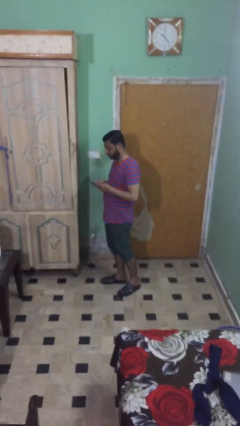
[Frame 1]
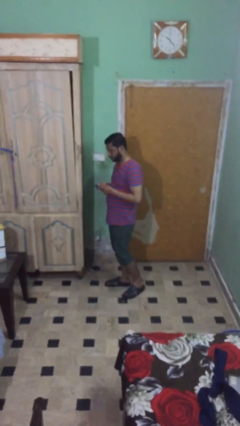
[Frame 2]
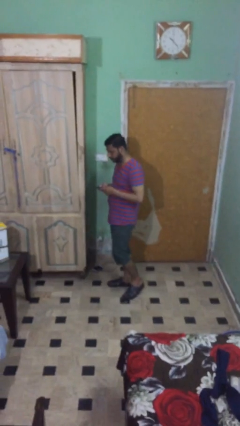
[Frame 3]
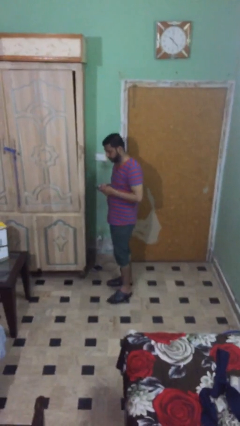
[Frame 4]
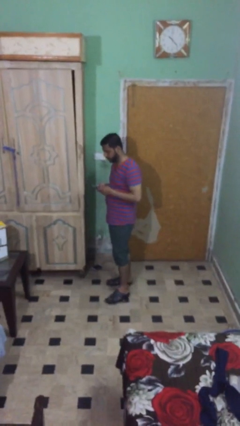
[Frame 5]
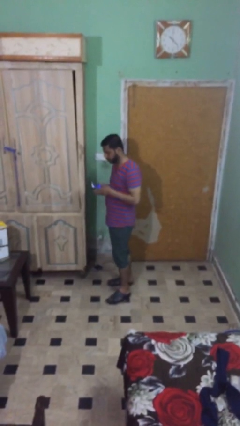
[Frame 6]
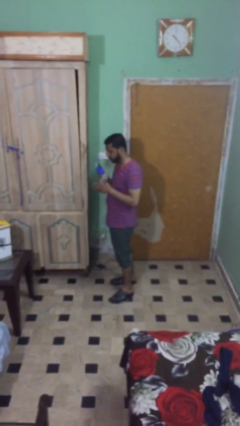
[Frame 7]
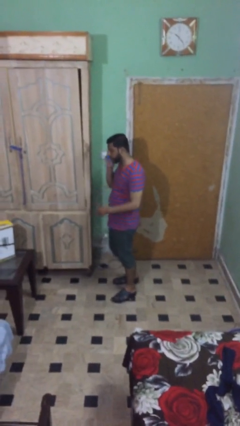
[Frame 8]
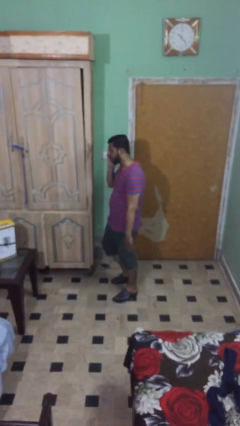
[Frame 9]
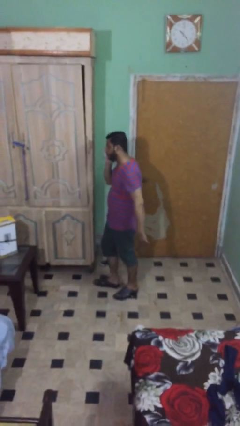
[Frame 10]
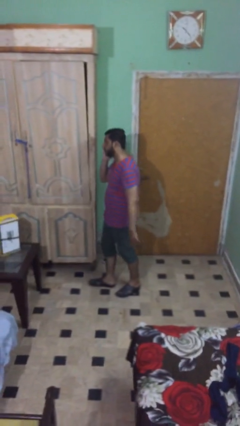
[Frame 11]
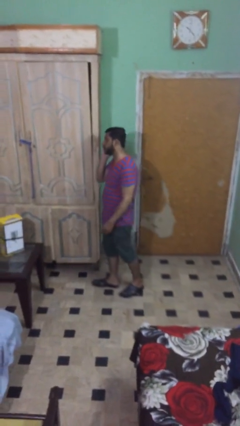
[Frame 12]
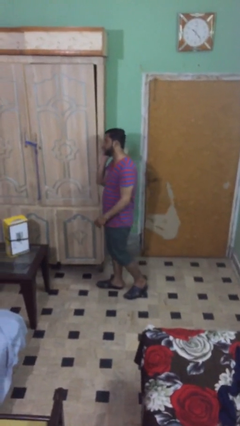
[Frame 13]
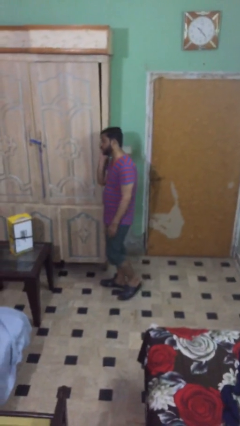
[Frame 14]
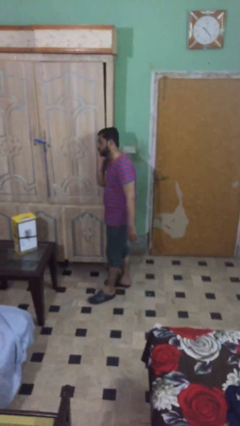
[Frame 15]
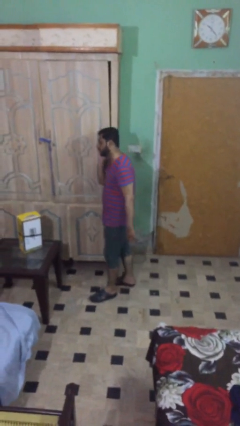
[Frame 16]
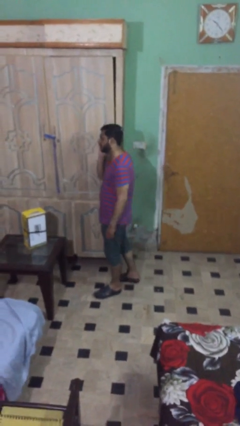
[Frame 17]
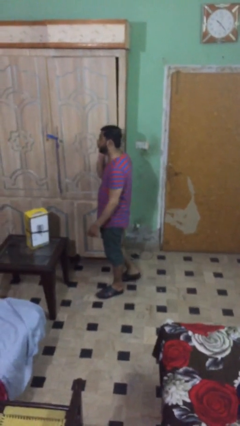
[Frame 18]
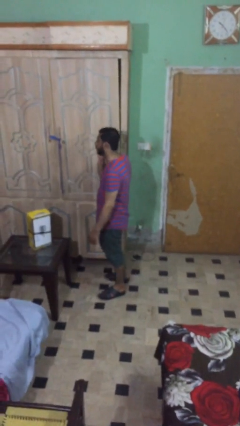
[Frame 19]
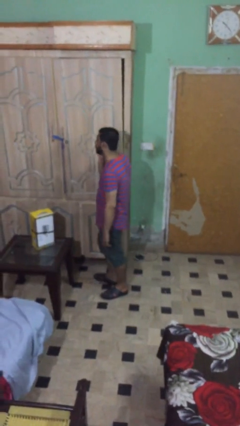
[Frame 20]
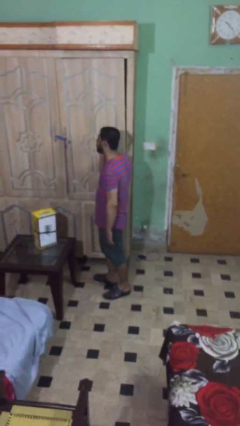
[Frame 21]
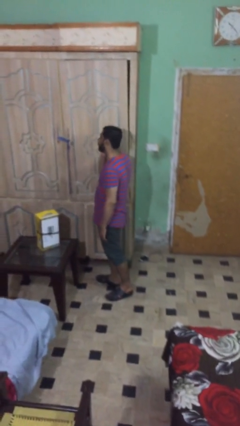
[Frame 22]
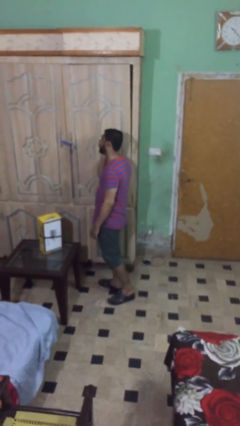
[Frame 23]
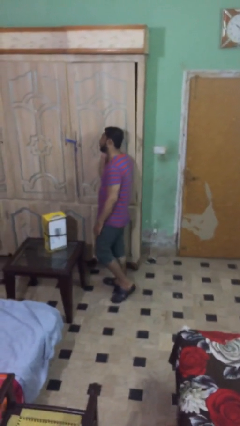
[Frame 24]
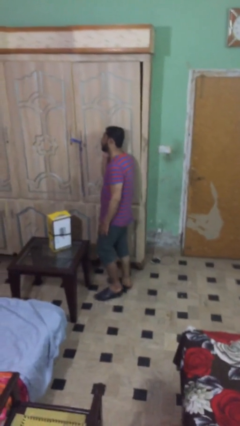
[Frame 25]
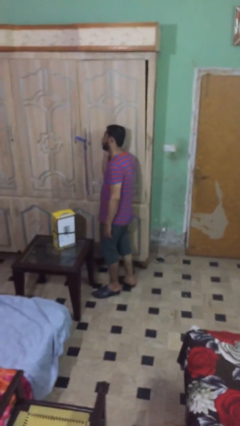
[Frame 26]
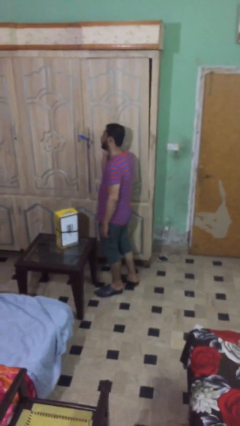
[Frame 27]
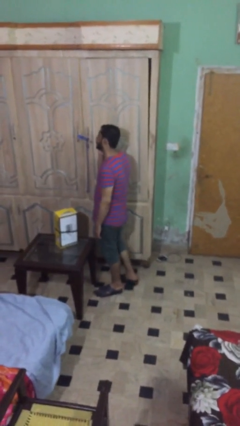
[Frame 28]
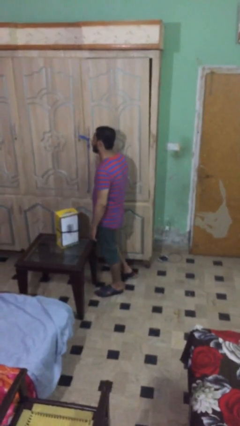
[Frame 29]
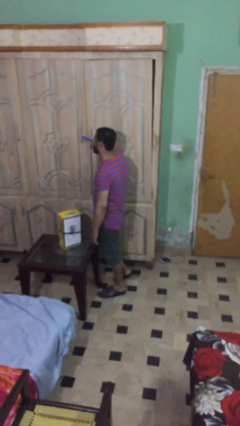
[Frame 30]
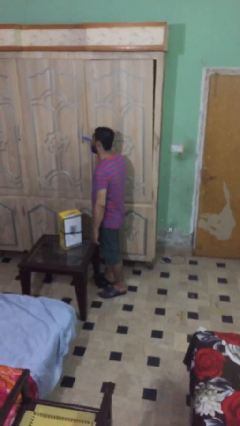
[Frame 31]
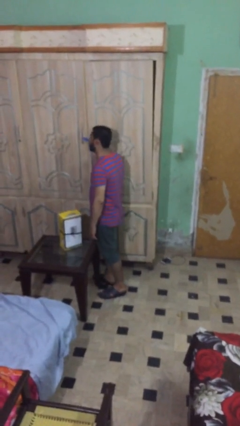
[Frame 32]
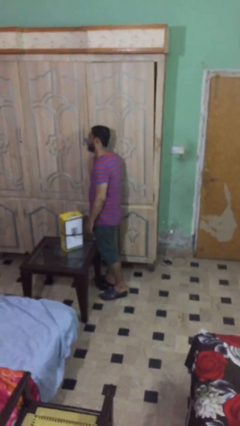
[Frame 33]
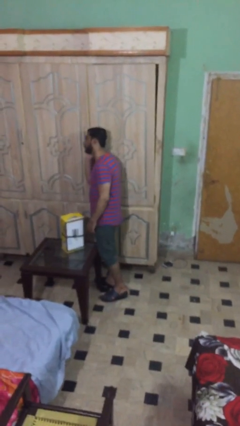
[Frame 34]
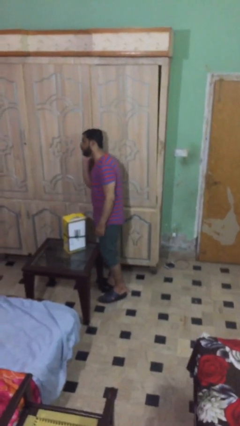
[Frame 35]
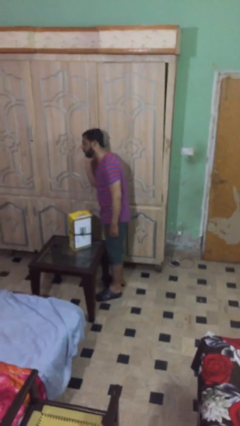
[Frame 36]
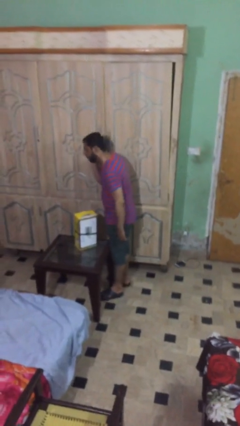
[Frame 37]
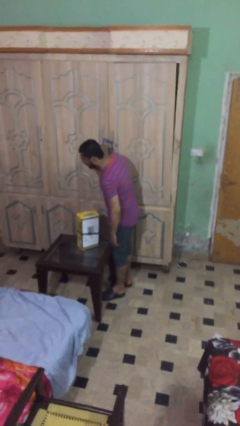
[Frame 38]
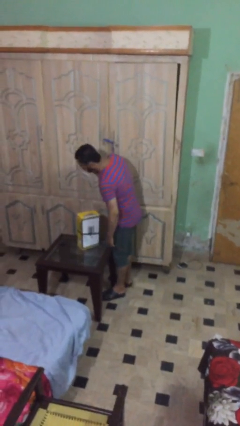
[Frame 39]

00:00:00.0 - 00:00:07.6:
person talks on phone

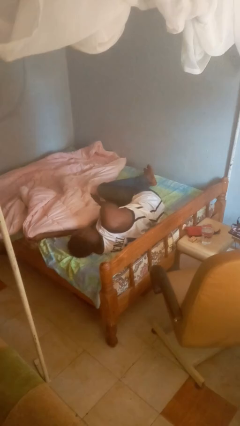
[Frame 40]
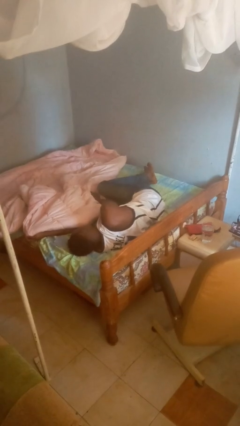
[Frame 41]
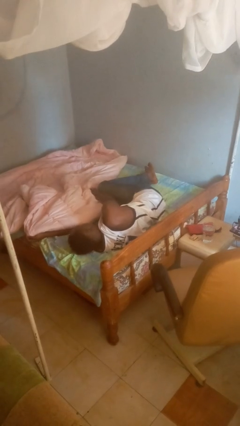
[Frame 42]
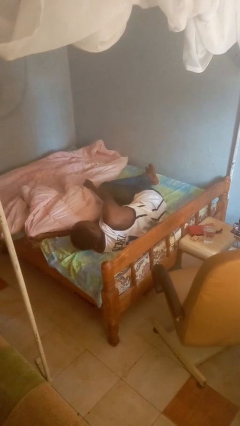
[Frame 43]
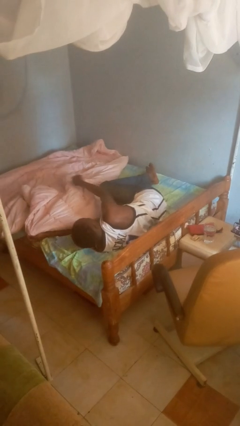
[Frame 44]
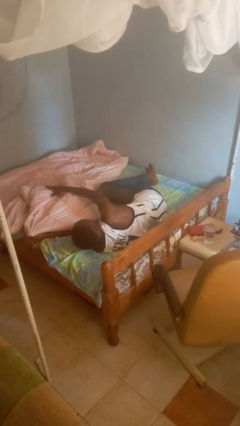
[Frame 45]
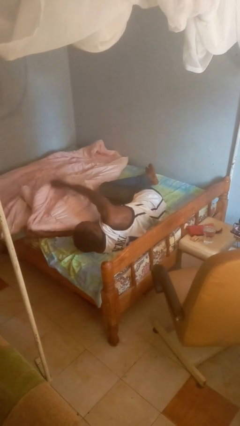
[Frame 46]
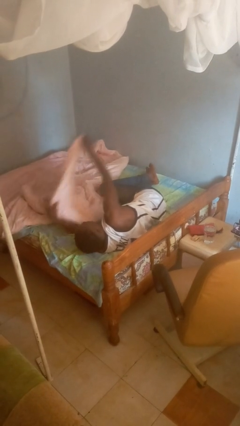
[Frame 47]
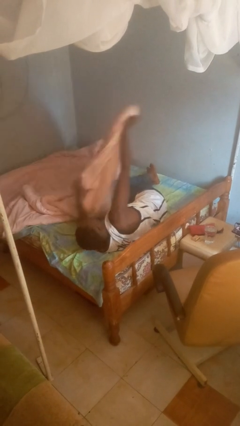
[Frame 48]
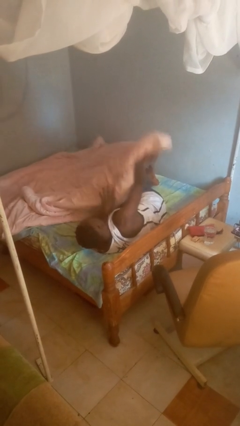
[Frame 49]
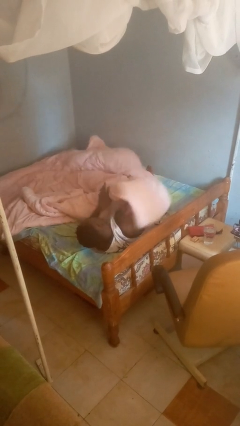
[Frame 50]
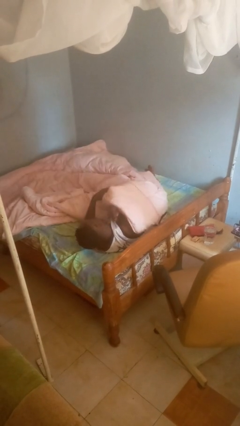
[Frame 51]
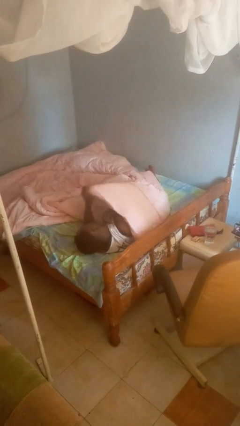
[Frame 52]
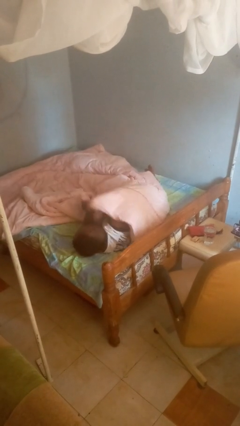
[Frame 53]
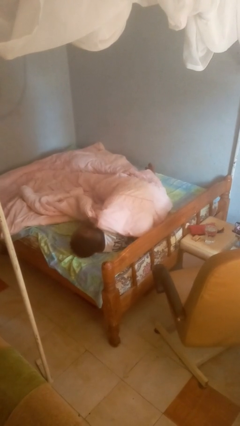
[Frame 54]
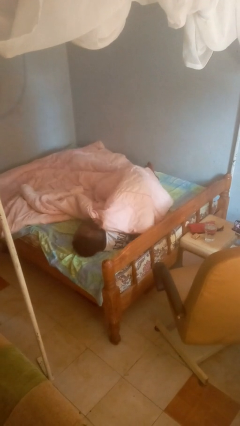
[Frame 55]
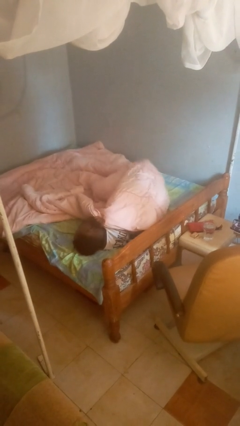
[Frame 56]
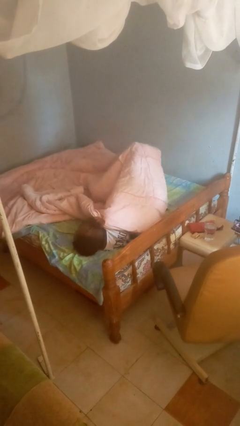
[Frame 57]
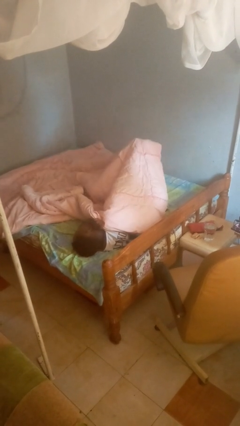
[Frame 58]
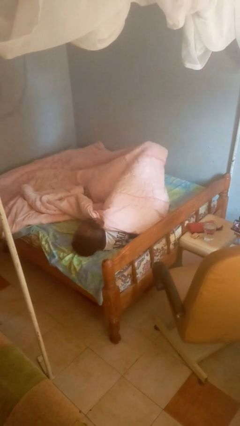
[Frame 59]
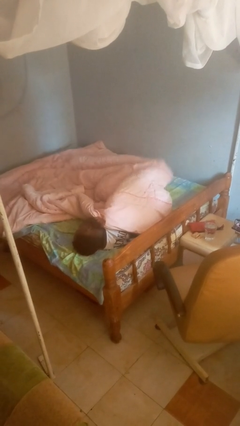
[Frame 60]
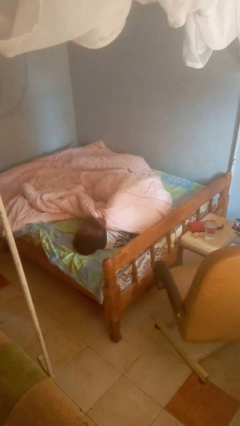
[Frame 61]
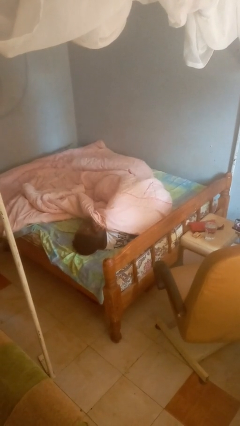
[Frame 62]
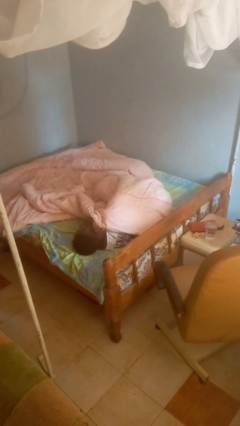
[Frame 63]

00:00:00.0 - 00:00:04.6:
person covers with blanket

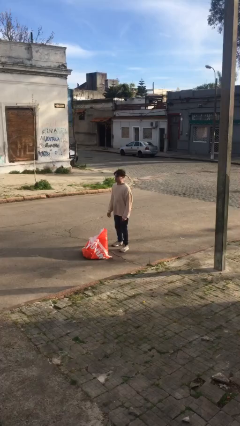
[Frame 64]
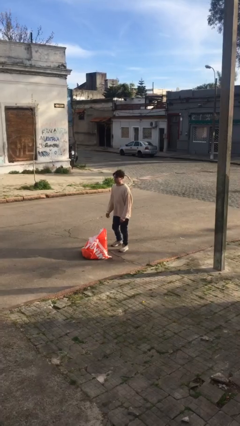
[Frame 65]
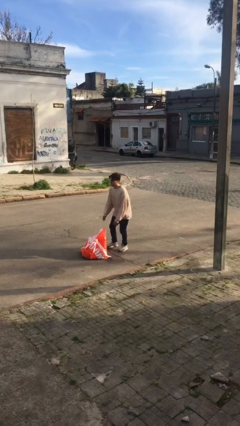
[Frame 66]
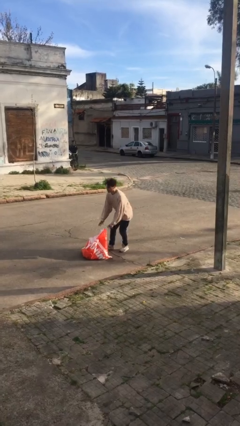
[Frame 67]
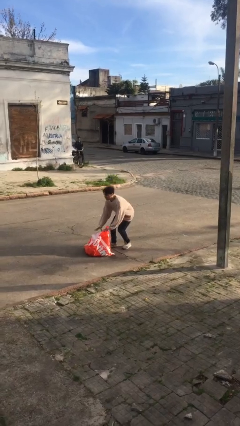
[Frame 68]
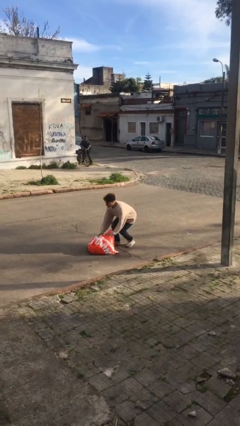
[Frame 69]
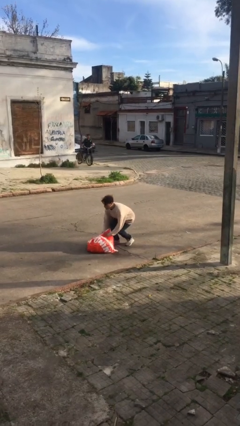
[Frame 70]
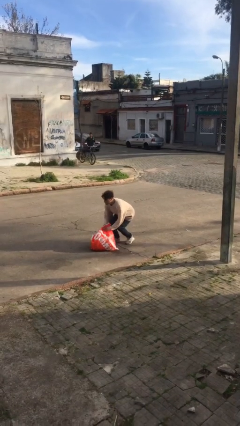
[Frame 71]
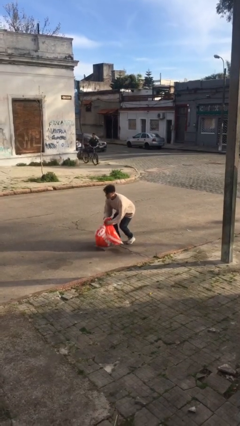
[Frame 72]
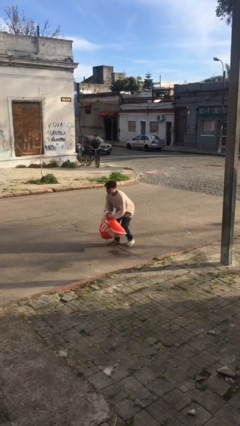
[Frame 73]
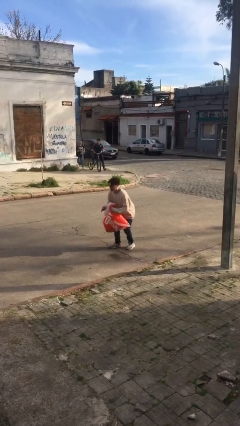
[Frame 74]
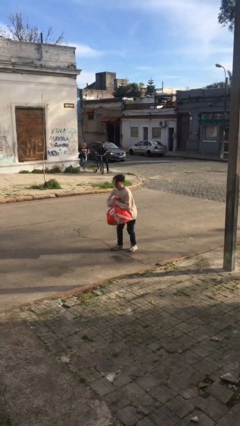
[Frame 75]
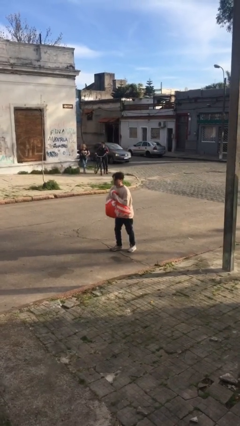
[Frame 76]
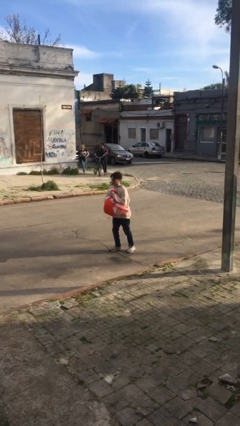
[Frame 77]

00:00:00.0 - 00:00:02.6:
person picks up object from floor

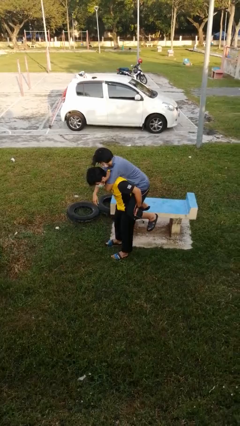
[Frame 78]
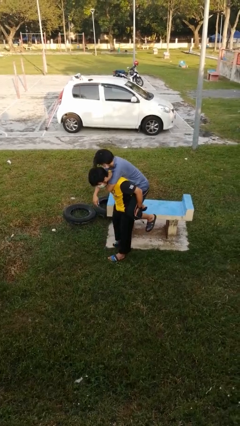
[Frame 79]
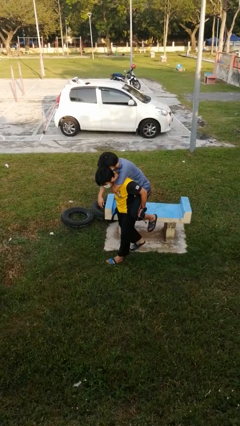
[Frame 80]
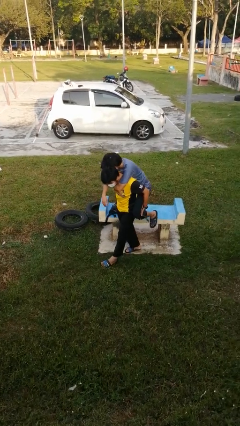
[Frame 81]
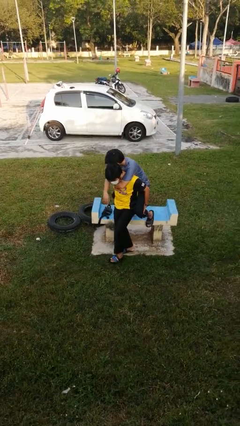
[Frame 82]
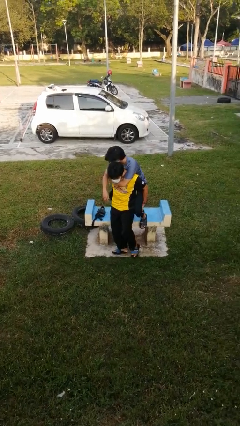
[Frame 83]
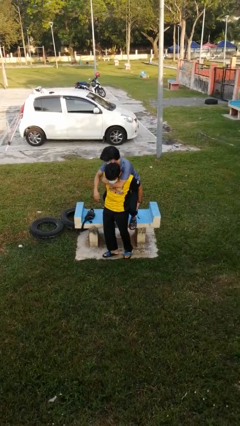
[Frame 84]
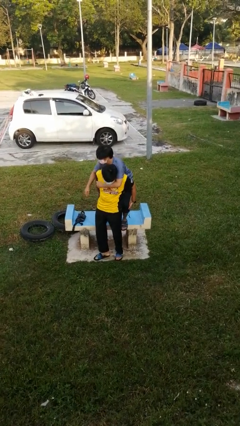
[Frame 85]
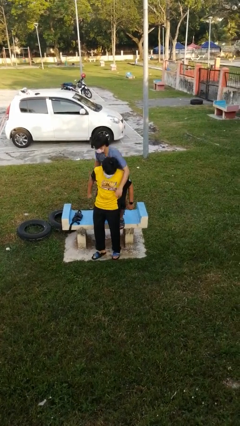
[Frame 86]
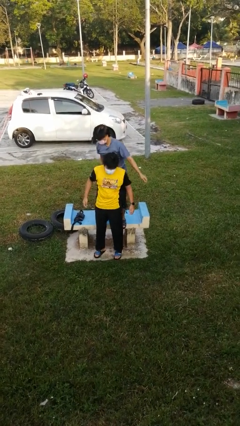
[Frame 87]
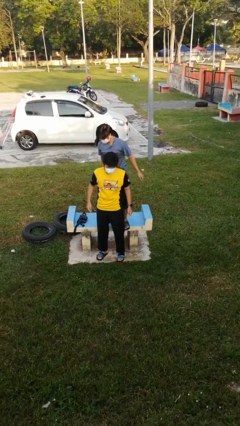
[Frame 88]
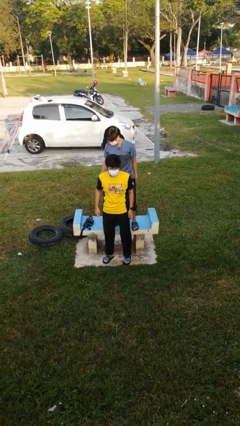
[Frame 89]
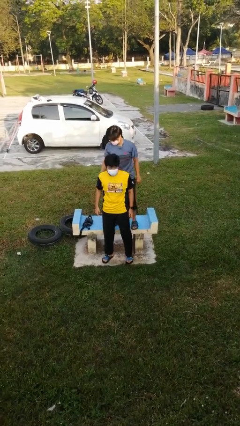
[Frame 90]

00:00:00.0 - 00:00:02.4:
person puts down person

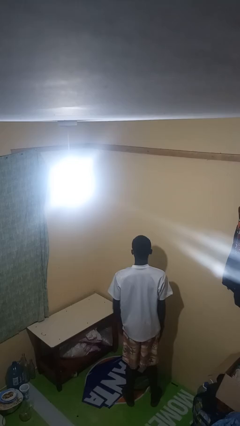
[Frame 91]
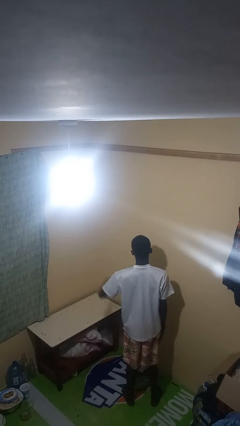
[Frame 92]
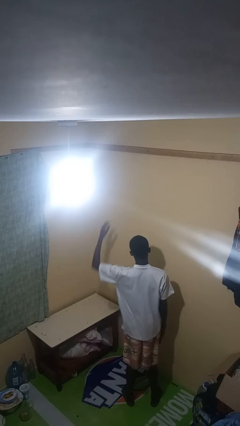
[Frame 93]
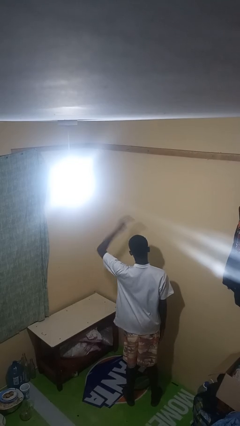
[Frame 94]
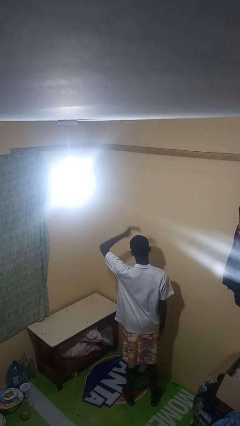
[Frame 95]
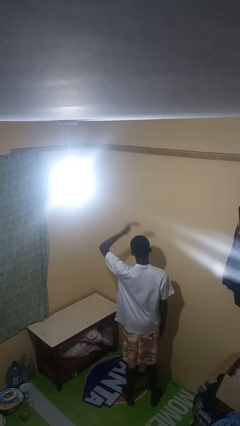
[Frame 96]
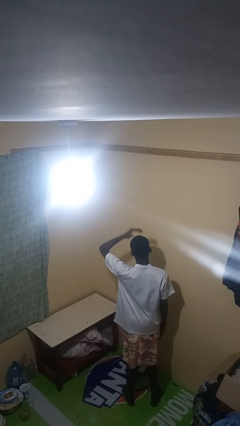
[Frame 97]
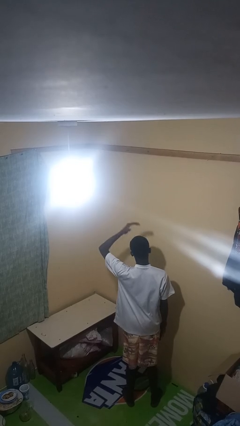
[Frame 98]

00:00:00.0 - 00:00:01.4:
person pats head
